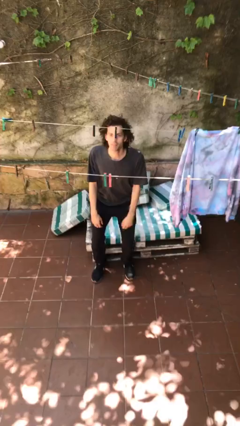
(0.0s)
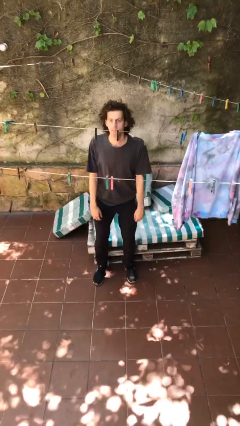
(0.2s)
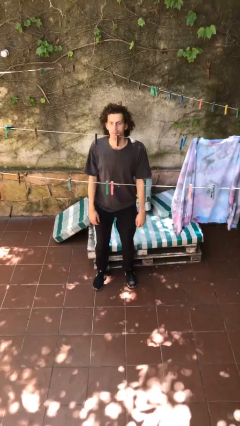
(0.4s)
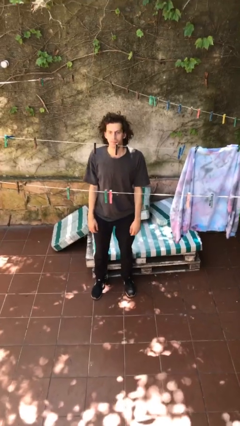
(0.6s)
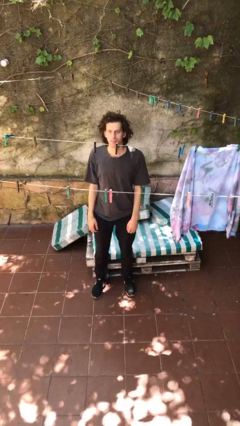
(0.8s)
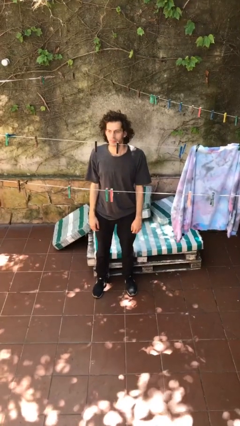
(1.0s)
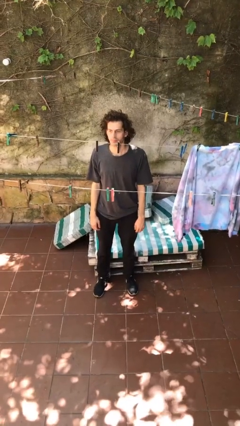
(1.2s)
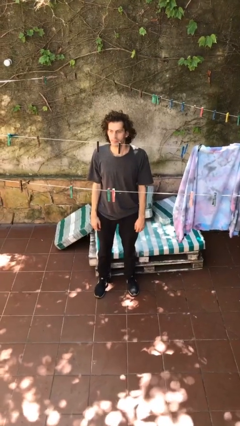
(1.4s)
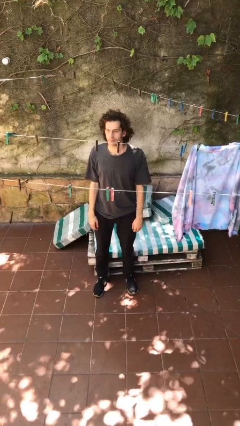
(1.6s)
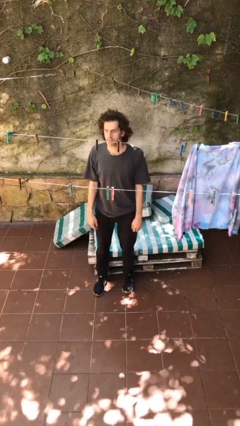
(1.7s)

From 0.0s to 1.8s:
person stands up

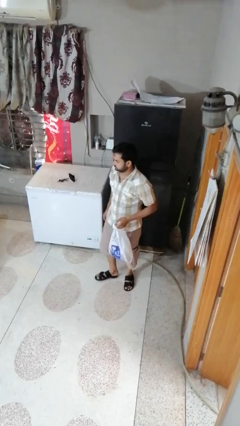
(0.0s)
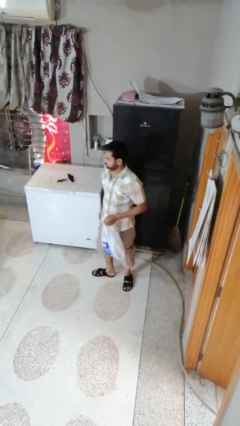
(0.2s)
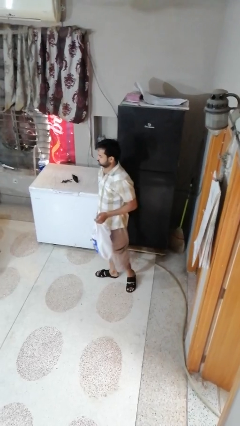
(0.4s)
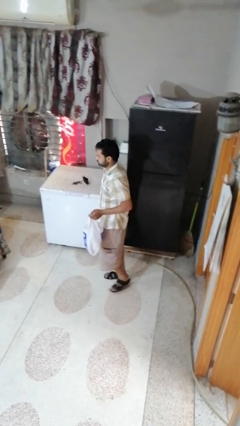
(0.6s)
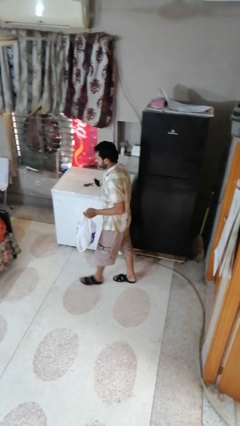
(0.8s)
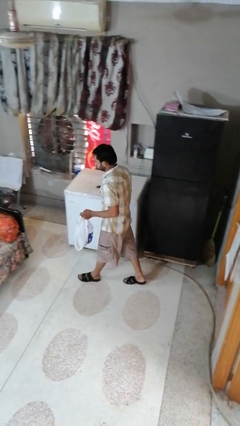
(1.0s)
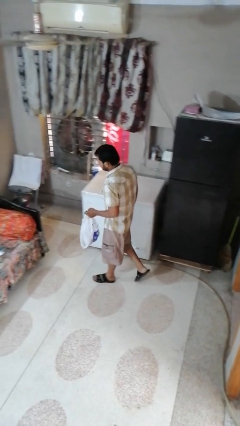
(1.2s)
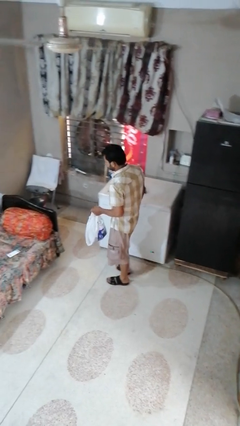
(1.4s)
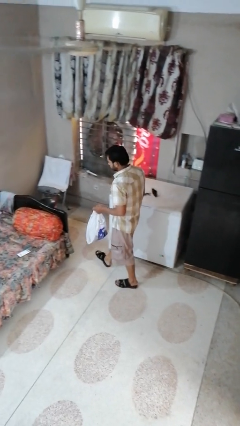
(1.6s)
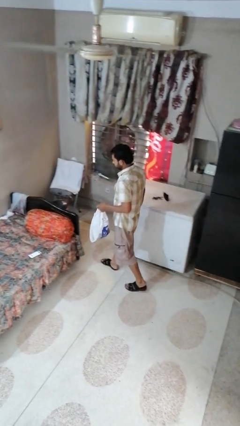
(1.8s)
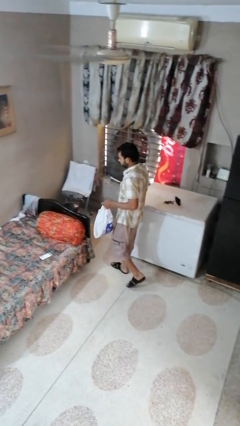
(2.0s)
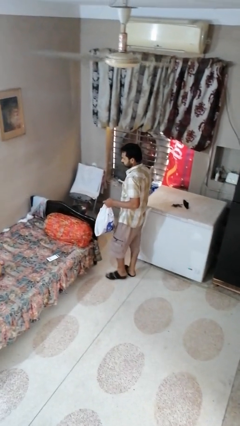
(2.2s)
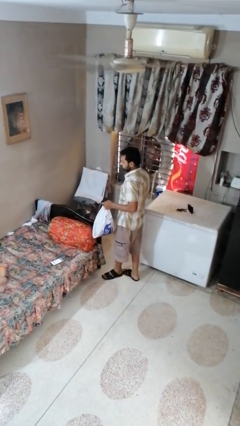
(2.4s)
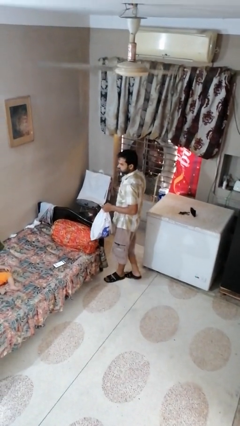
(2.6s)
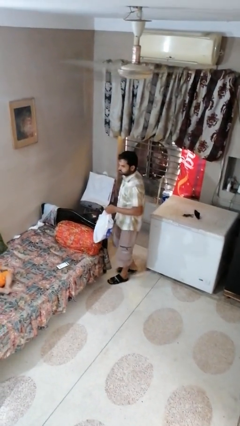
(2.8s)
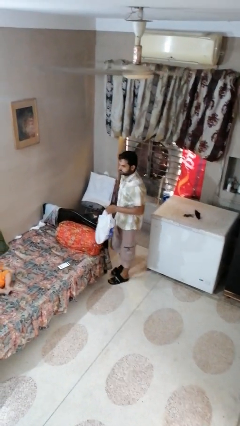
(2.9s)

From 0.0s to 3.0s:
person carries groceries

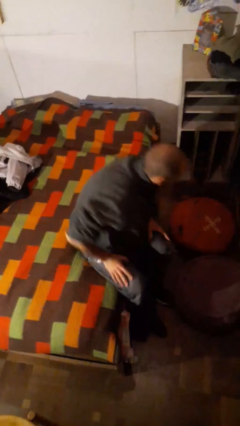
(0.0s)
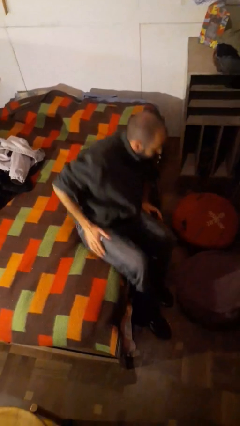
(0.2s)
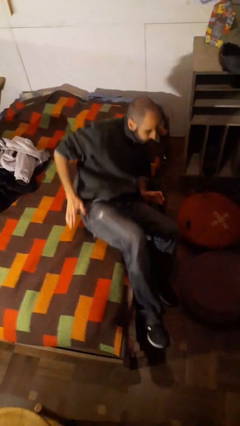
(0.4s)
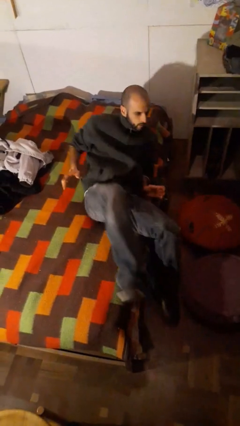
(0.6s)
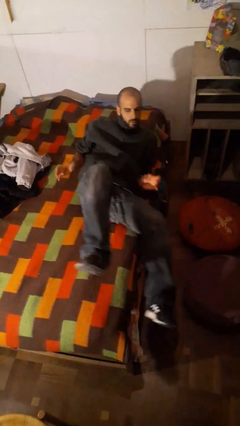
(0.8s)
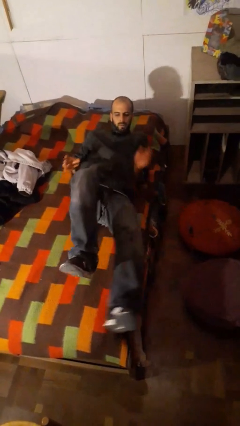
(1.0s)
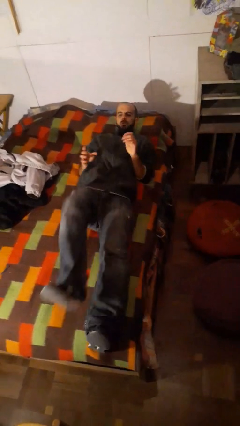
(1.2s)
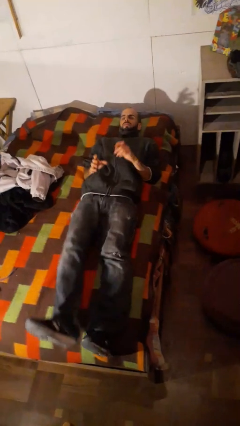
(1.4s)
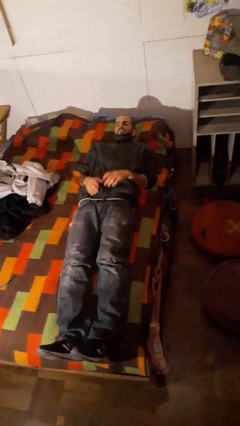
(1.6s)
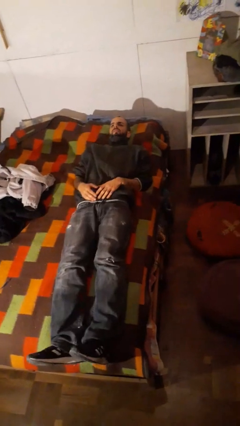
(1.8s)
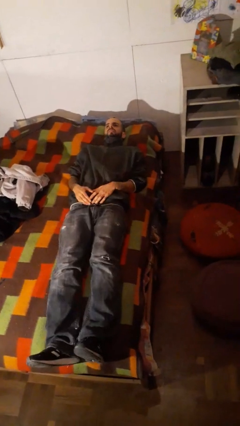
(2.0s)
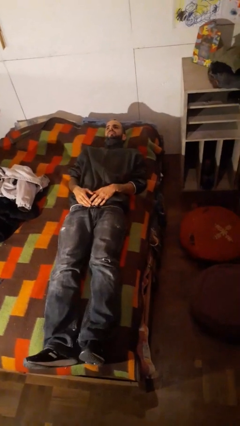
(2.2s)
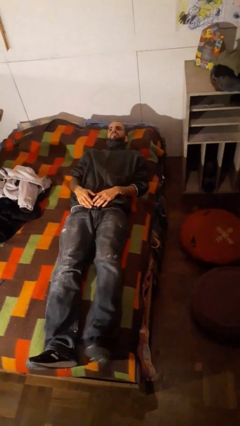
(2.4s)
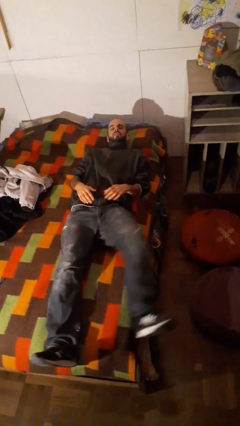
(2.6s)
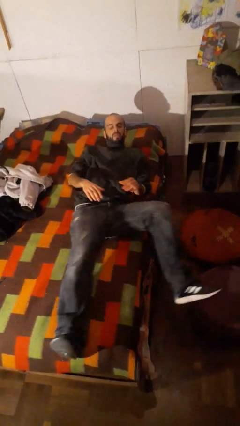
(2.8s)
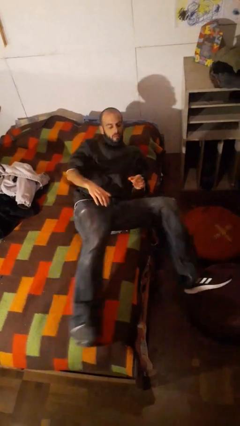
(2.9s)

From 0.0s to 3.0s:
person lies down on bed

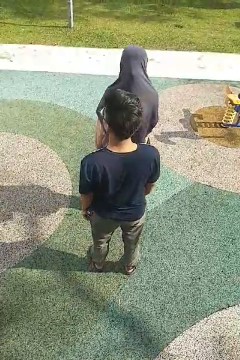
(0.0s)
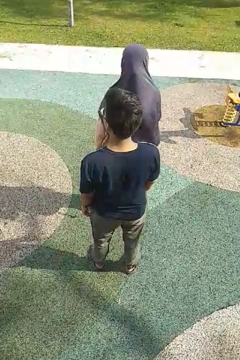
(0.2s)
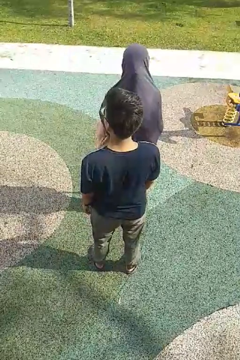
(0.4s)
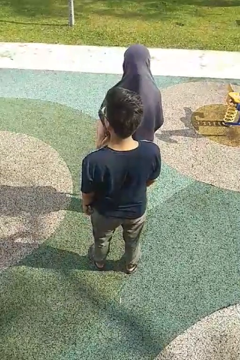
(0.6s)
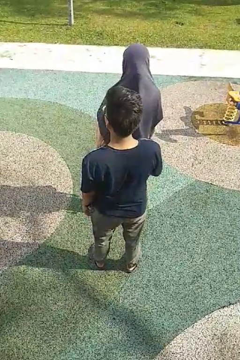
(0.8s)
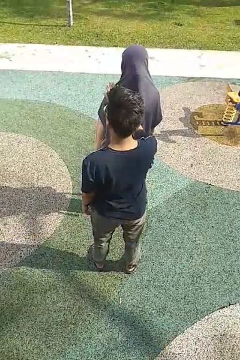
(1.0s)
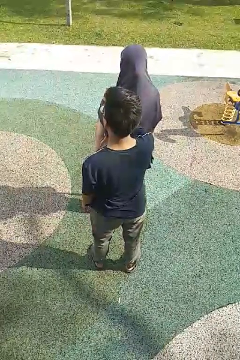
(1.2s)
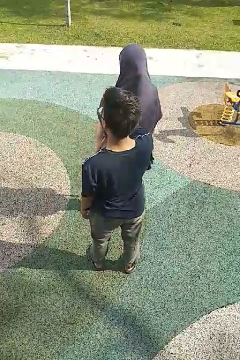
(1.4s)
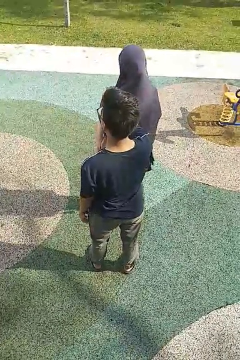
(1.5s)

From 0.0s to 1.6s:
person grabs person by shoulder

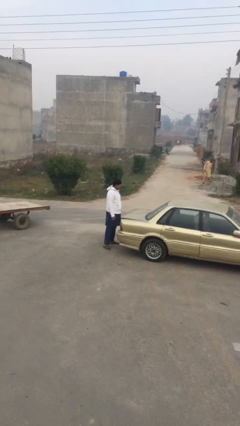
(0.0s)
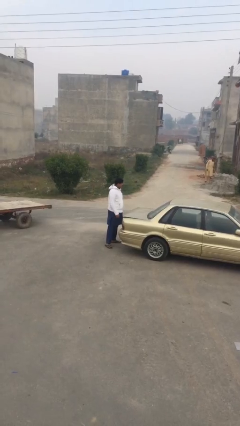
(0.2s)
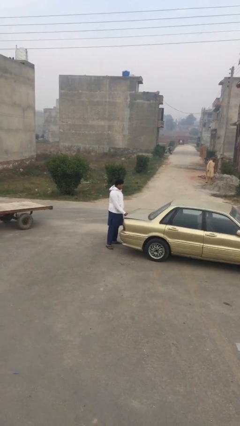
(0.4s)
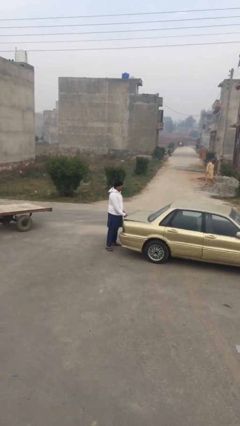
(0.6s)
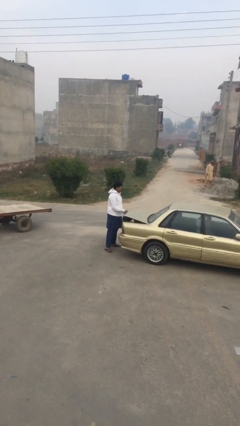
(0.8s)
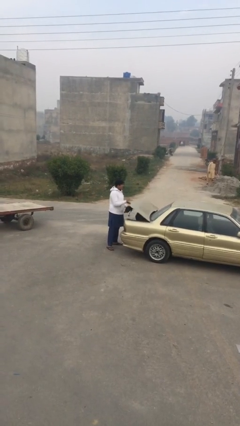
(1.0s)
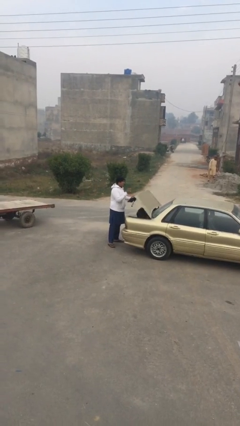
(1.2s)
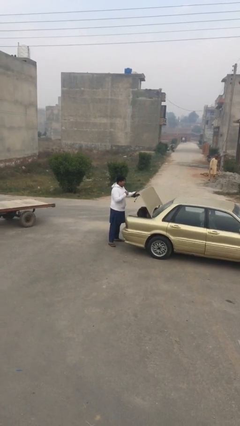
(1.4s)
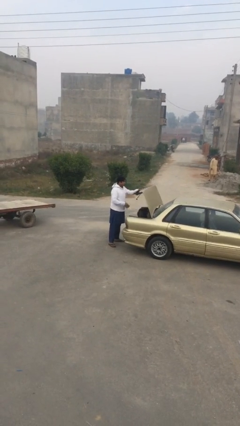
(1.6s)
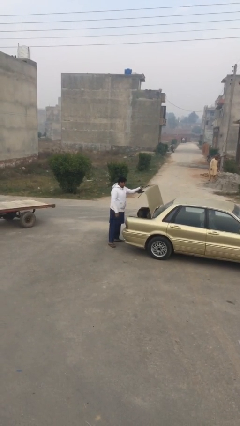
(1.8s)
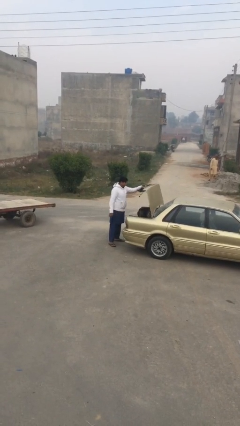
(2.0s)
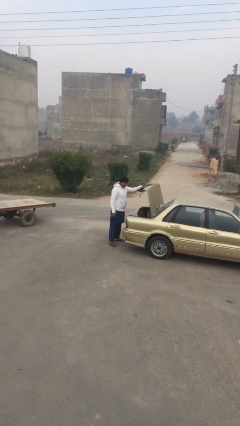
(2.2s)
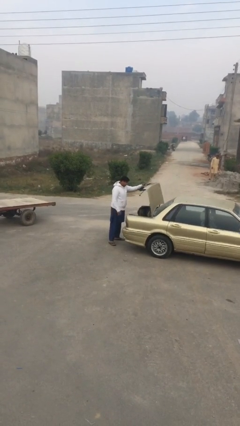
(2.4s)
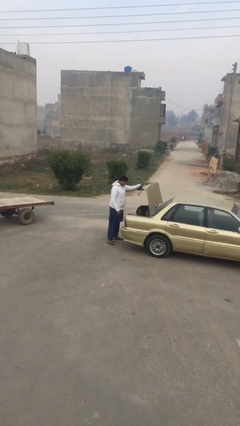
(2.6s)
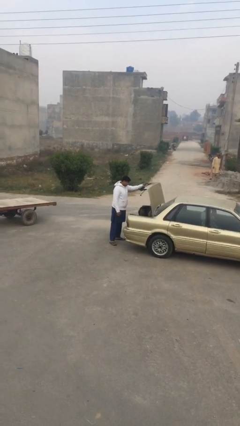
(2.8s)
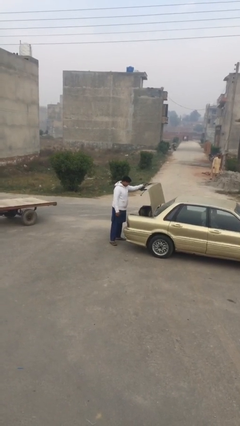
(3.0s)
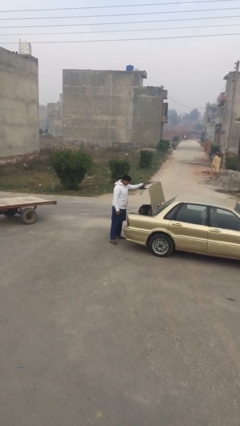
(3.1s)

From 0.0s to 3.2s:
person opens car trunk

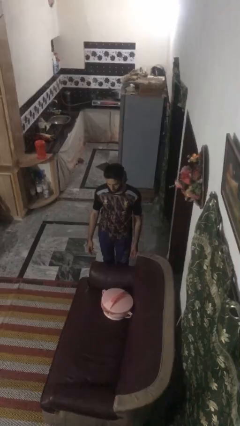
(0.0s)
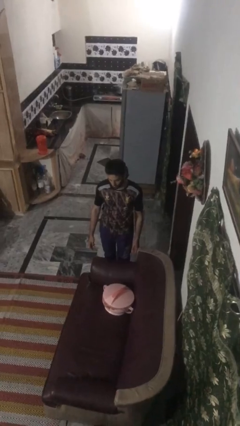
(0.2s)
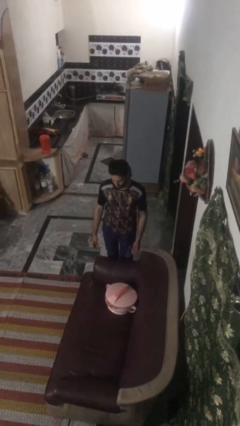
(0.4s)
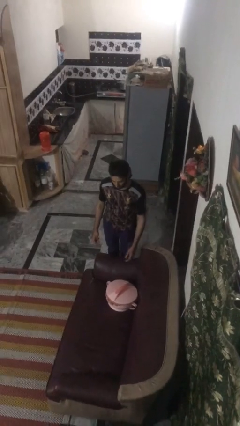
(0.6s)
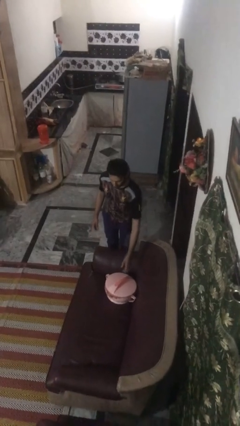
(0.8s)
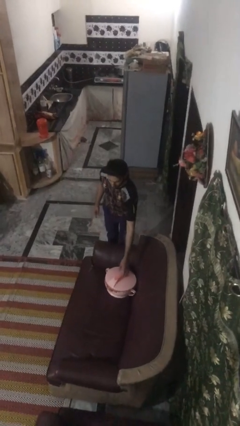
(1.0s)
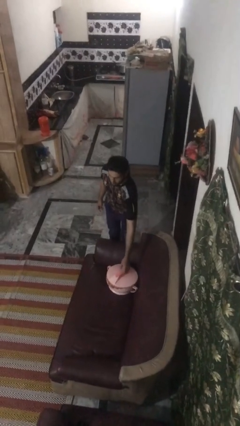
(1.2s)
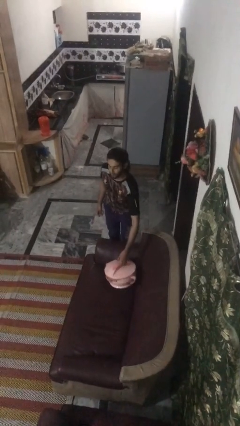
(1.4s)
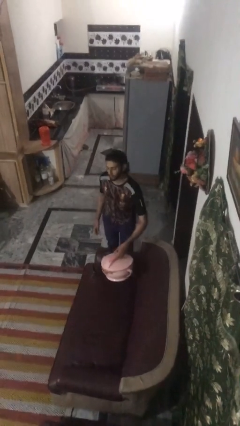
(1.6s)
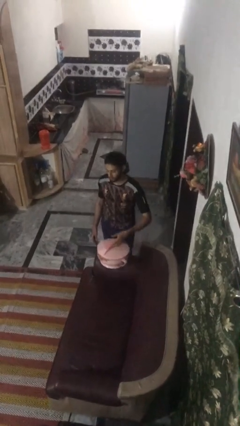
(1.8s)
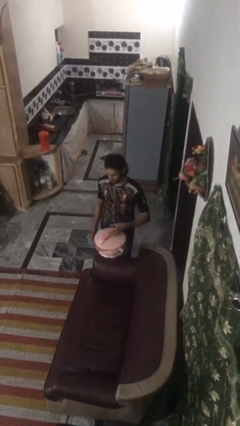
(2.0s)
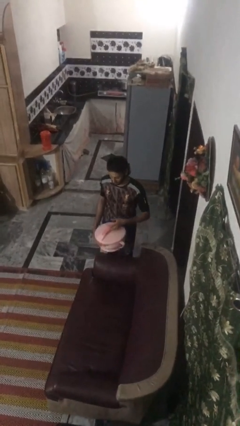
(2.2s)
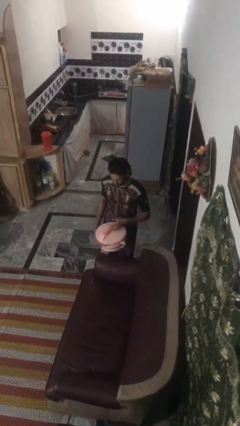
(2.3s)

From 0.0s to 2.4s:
person picks up object from couch

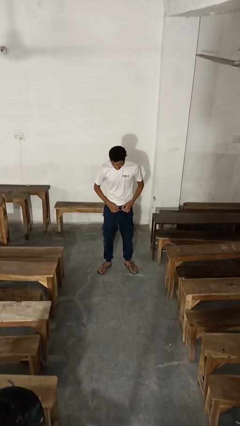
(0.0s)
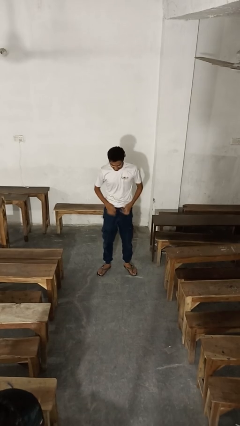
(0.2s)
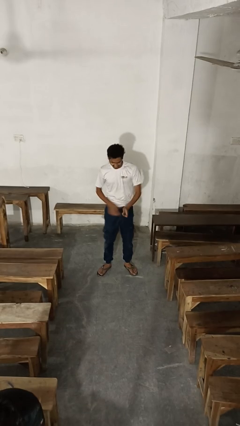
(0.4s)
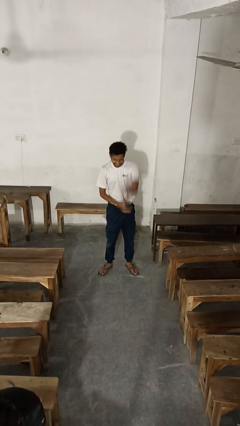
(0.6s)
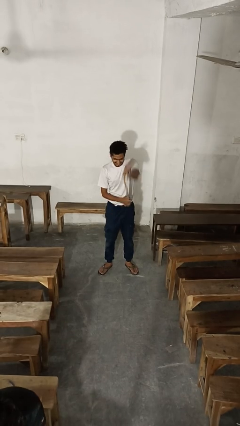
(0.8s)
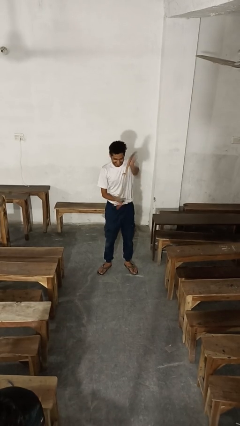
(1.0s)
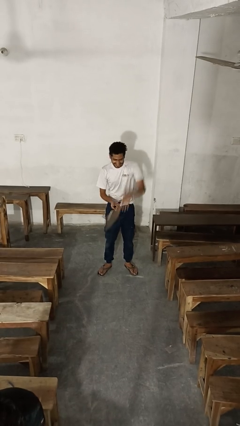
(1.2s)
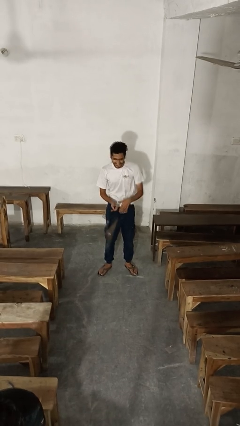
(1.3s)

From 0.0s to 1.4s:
person takes off belt

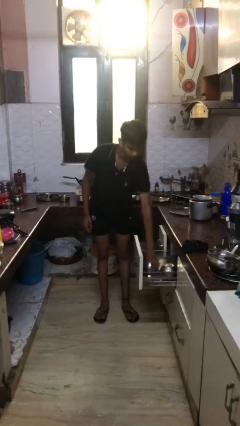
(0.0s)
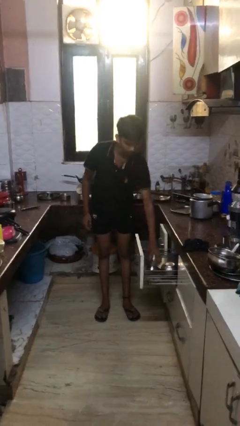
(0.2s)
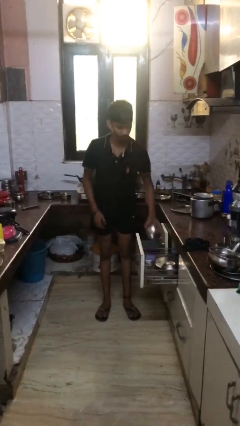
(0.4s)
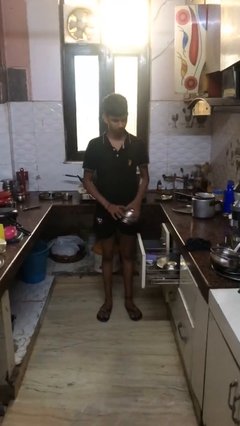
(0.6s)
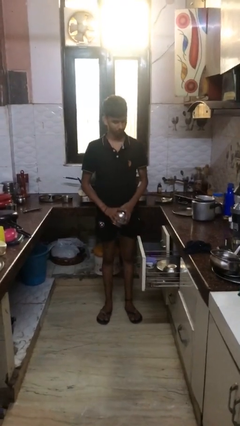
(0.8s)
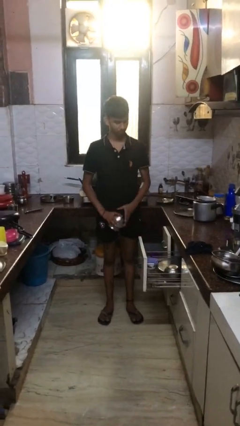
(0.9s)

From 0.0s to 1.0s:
person takes object from kitchen drawer
